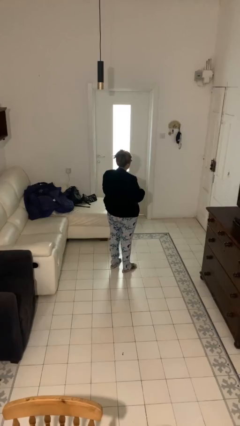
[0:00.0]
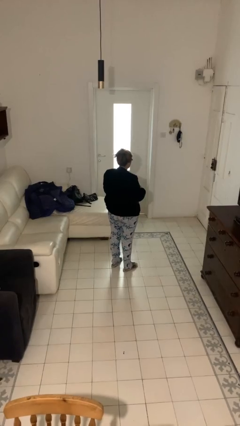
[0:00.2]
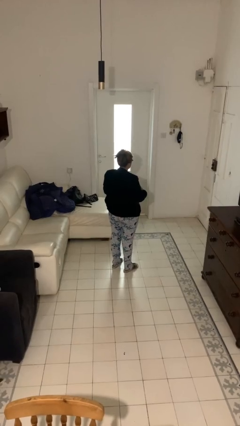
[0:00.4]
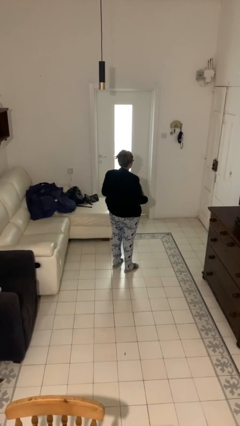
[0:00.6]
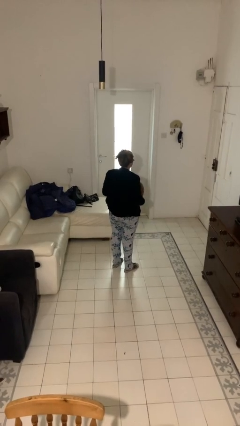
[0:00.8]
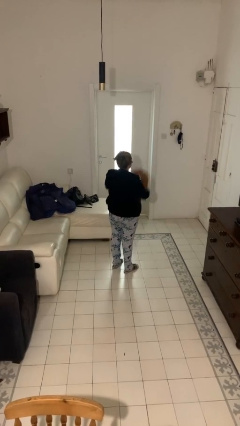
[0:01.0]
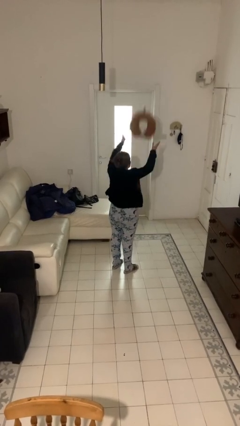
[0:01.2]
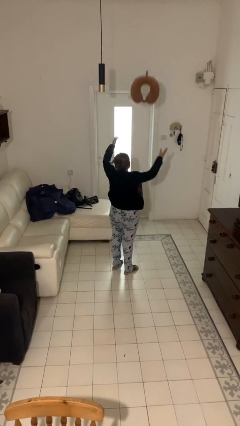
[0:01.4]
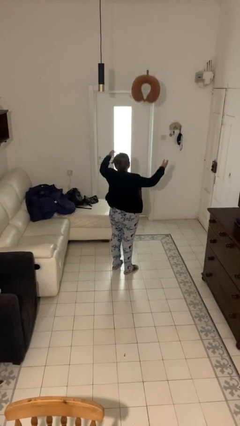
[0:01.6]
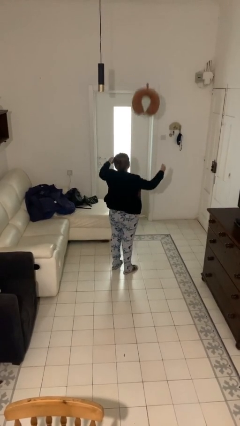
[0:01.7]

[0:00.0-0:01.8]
person drops object

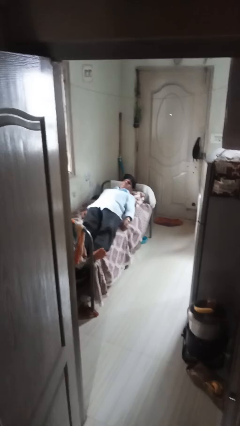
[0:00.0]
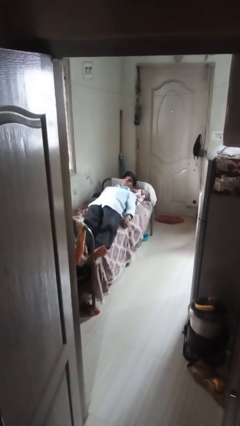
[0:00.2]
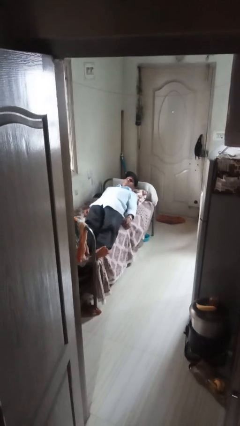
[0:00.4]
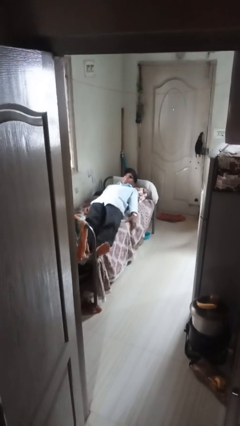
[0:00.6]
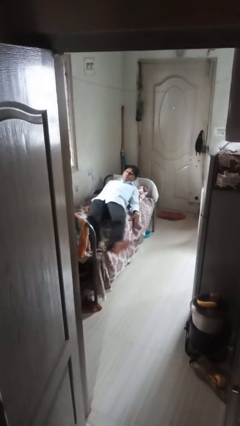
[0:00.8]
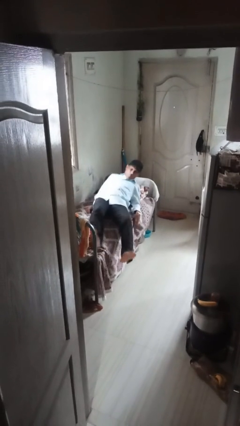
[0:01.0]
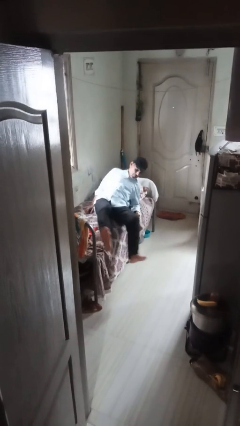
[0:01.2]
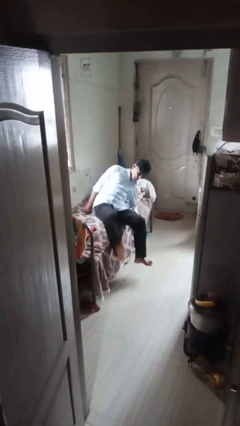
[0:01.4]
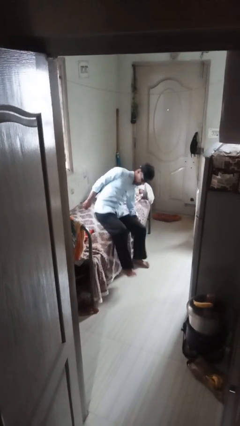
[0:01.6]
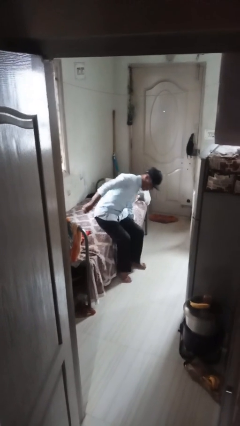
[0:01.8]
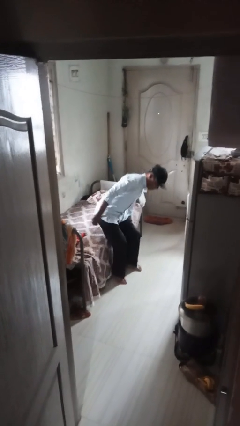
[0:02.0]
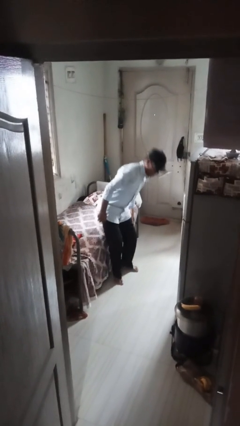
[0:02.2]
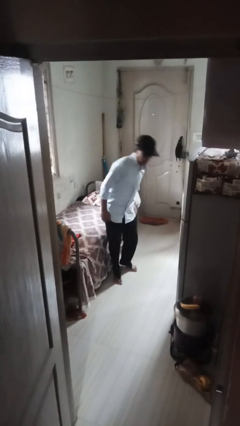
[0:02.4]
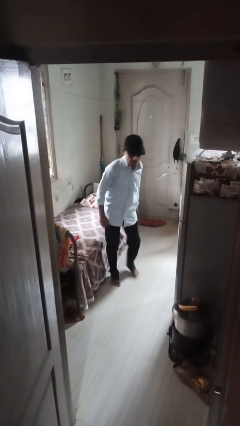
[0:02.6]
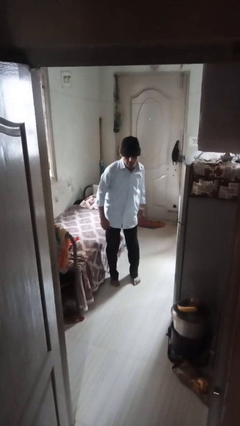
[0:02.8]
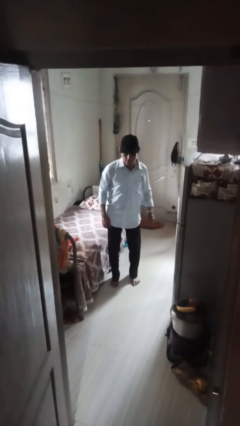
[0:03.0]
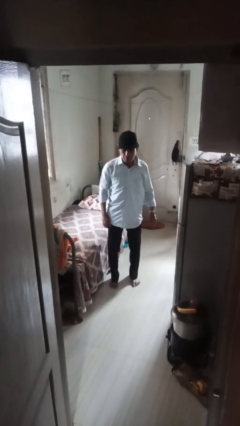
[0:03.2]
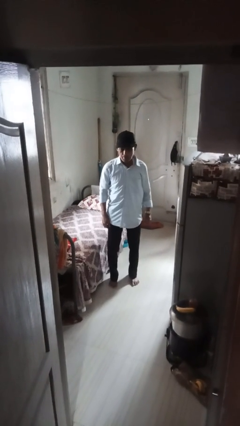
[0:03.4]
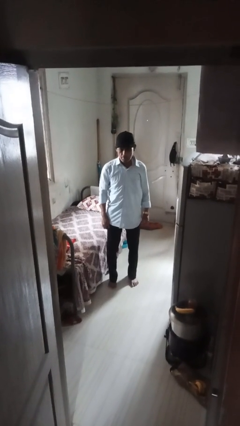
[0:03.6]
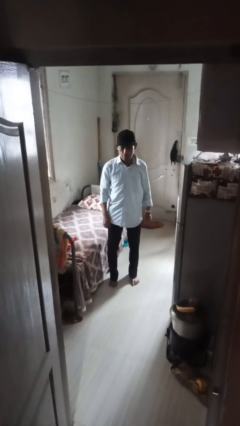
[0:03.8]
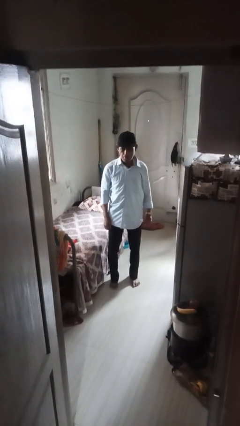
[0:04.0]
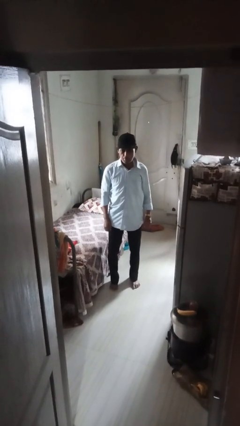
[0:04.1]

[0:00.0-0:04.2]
person stands up

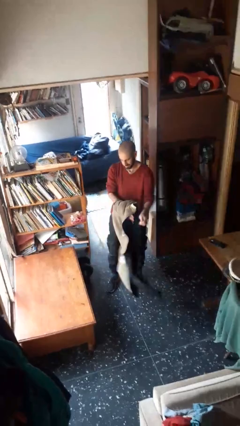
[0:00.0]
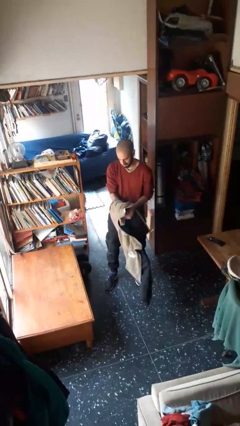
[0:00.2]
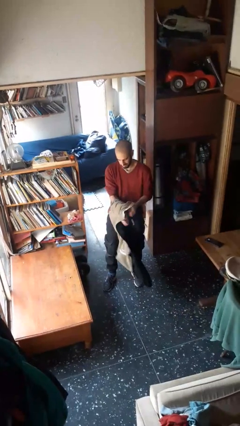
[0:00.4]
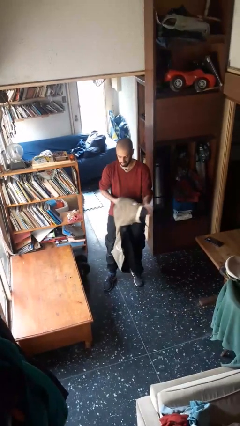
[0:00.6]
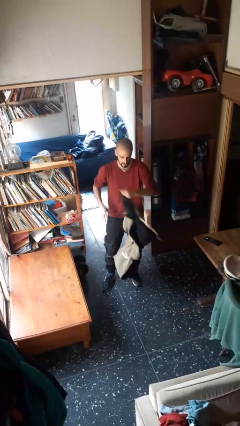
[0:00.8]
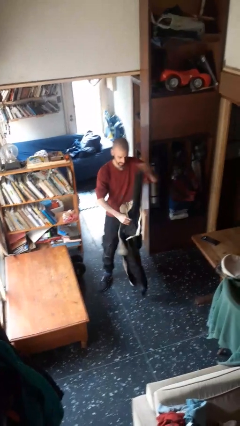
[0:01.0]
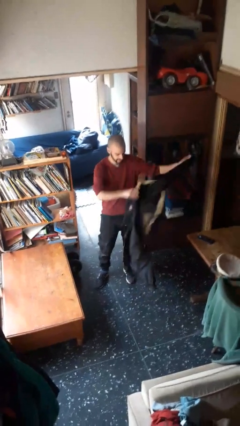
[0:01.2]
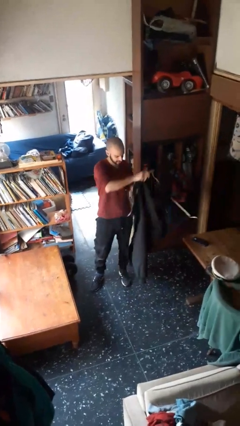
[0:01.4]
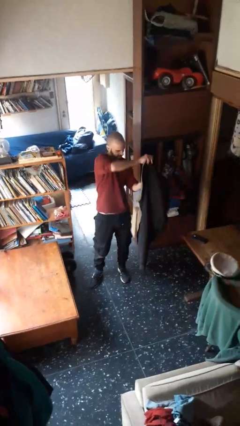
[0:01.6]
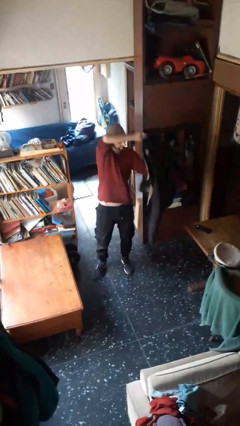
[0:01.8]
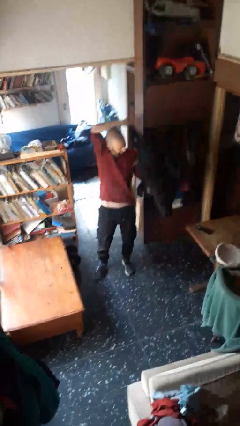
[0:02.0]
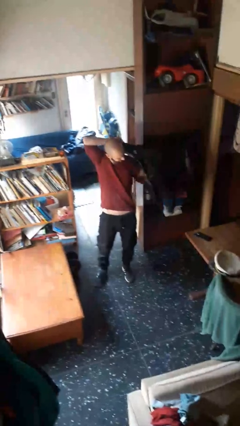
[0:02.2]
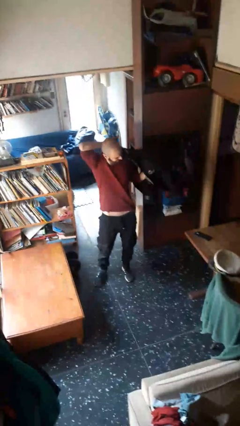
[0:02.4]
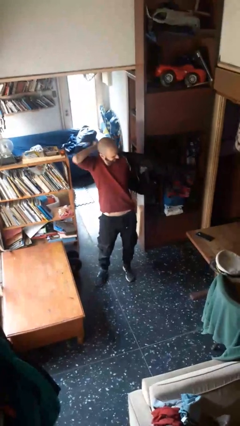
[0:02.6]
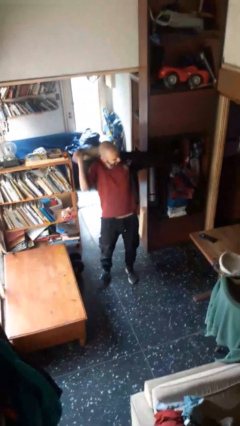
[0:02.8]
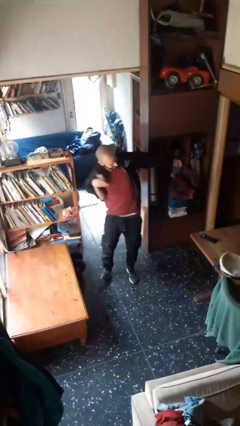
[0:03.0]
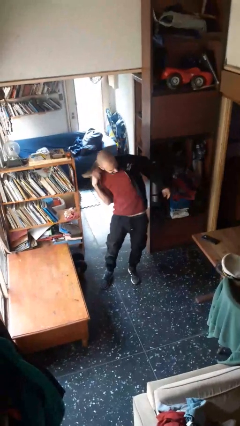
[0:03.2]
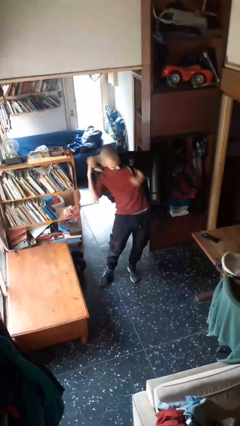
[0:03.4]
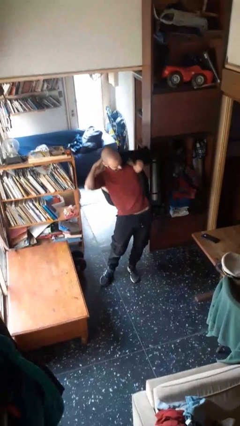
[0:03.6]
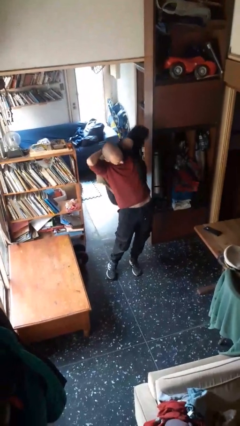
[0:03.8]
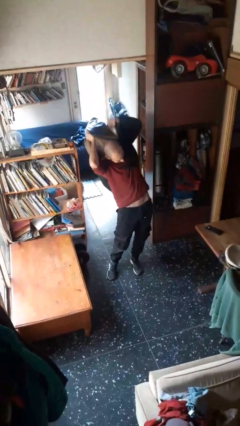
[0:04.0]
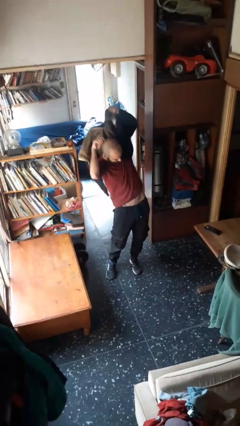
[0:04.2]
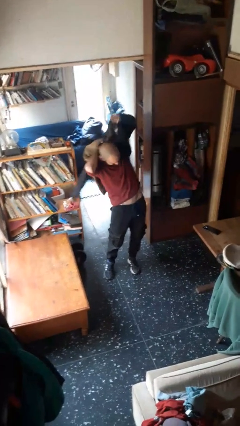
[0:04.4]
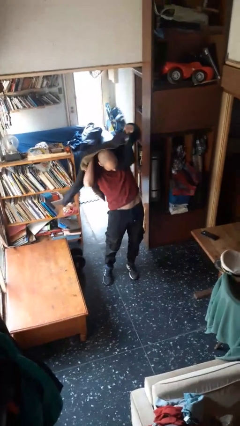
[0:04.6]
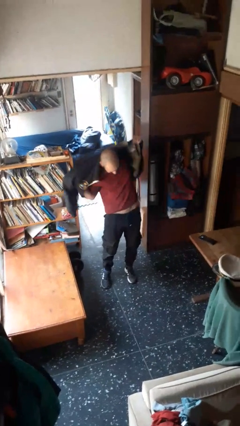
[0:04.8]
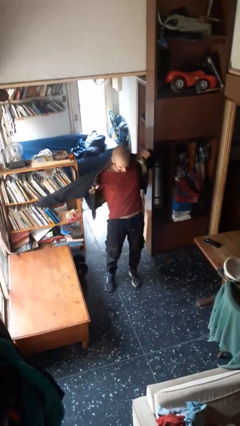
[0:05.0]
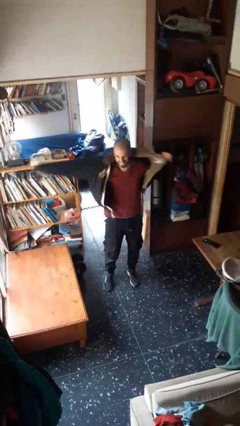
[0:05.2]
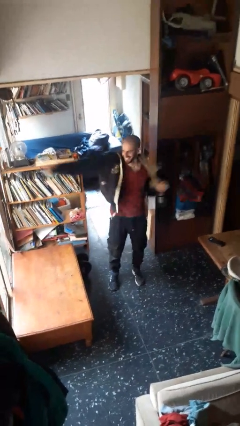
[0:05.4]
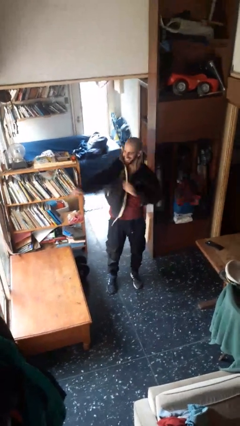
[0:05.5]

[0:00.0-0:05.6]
person puts on jacket

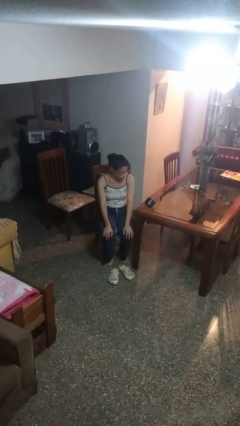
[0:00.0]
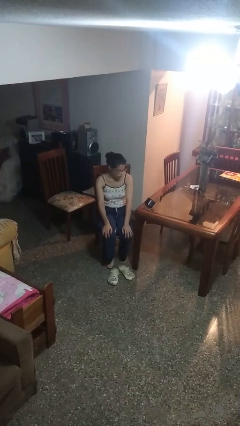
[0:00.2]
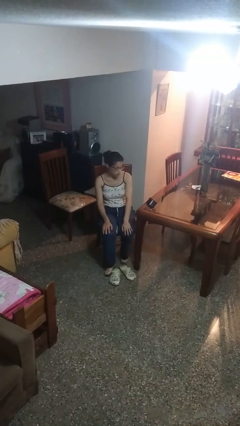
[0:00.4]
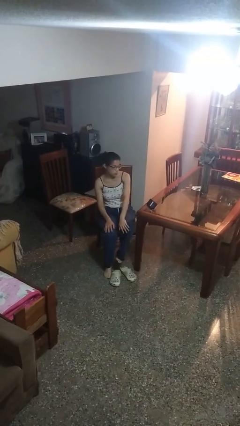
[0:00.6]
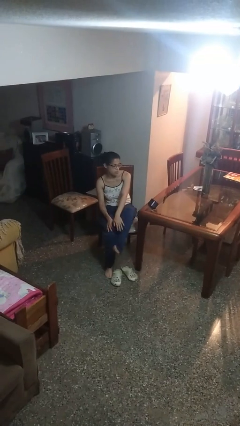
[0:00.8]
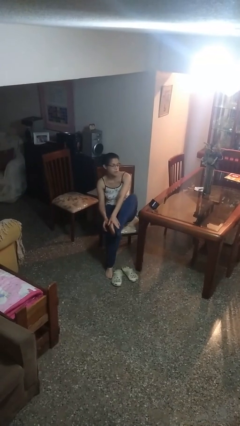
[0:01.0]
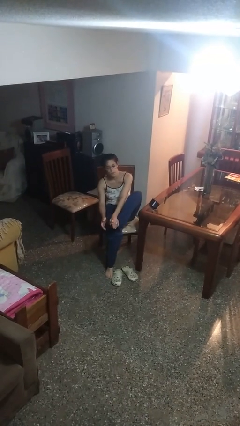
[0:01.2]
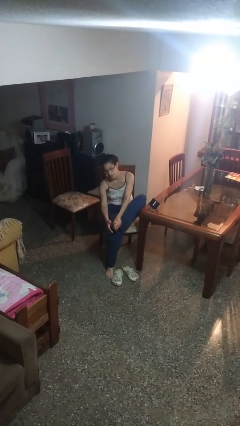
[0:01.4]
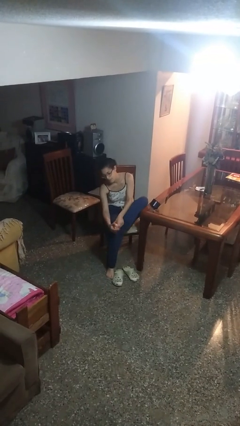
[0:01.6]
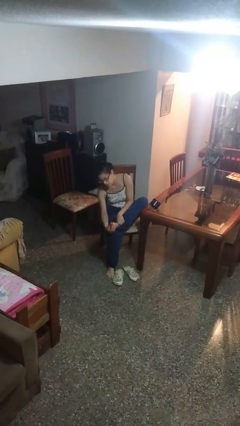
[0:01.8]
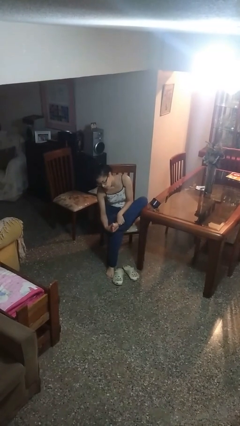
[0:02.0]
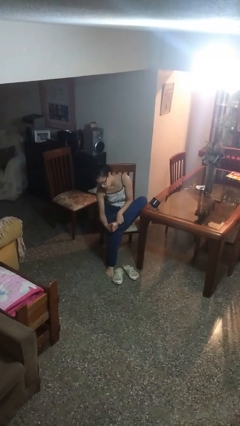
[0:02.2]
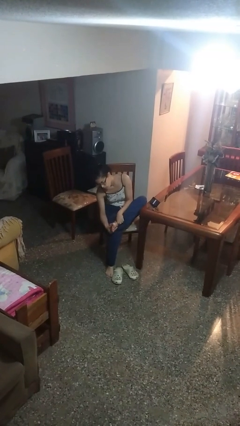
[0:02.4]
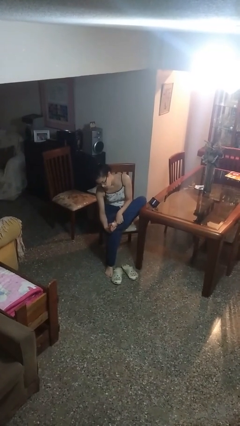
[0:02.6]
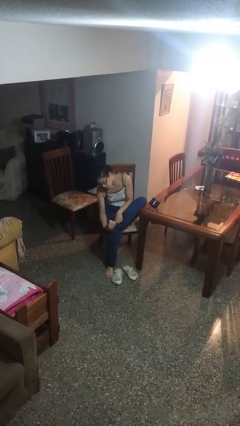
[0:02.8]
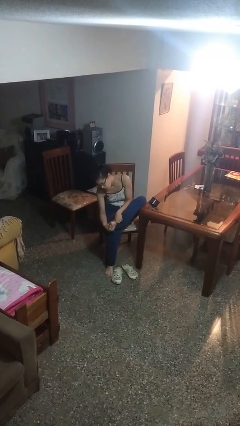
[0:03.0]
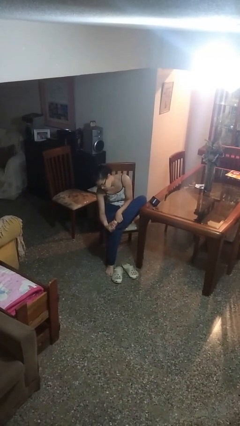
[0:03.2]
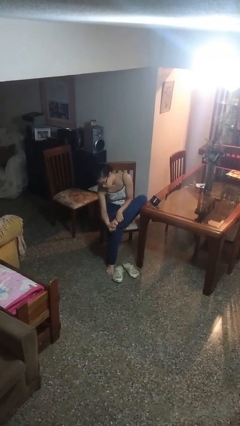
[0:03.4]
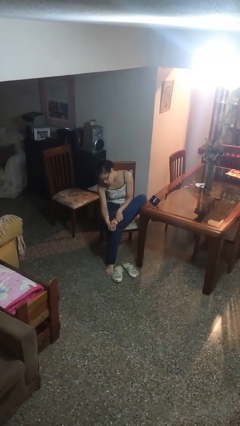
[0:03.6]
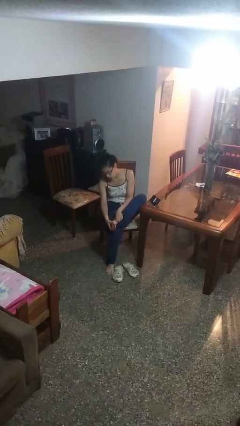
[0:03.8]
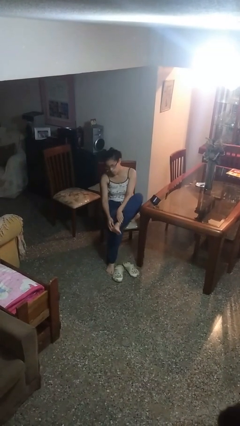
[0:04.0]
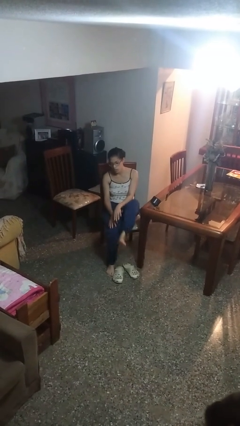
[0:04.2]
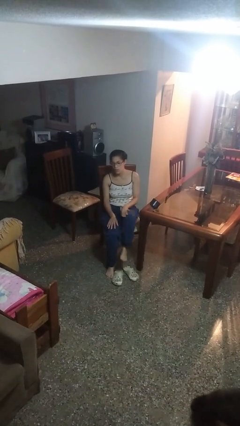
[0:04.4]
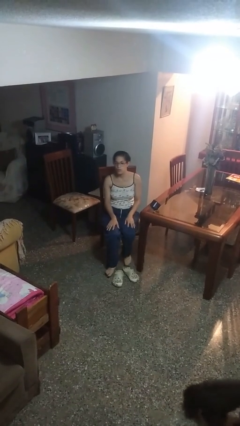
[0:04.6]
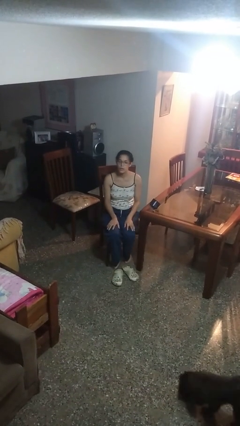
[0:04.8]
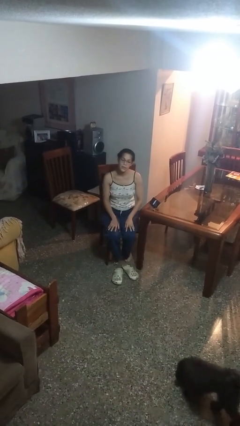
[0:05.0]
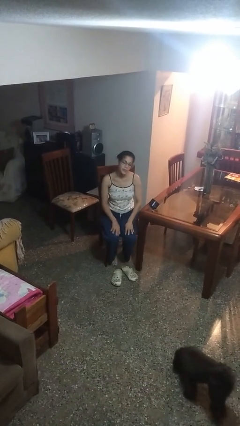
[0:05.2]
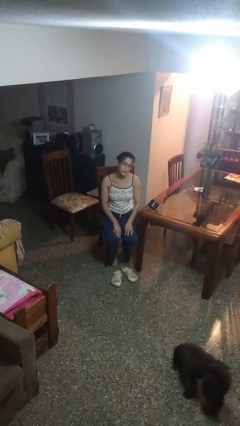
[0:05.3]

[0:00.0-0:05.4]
person rubs foot

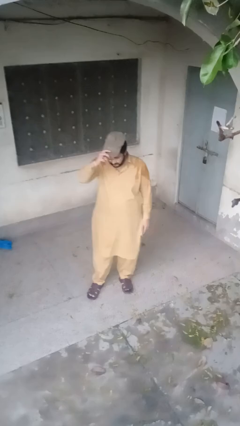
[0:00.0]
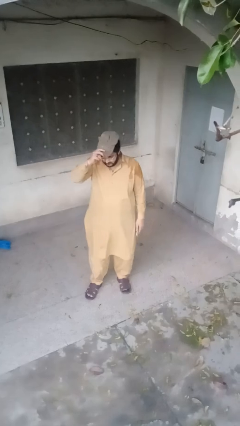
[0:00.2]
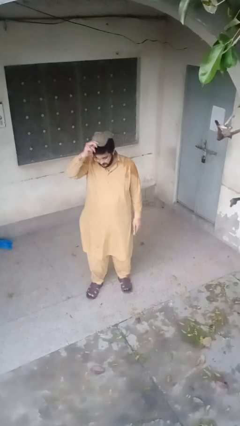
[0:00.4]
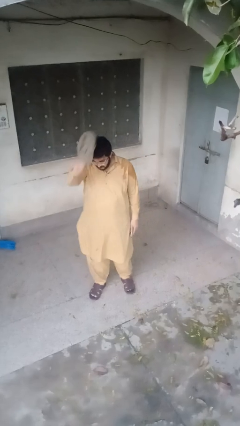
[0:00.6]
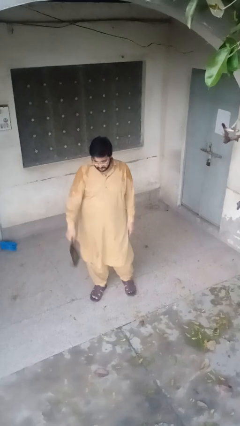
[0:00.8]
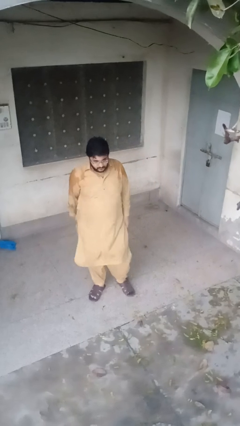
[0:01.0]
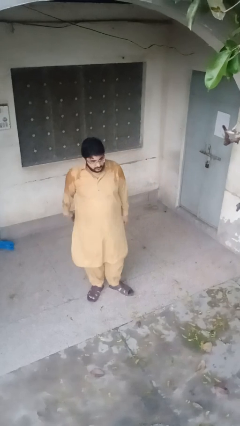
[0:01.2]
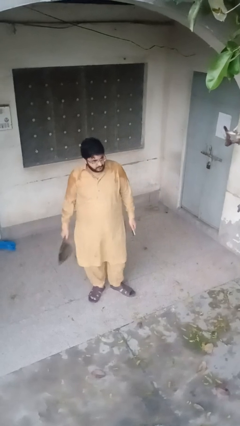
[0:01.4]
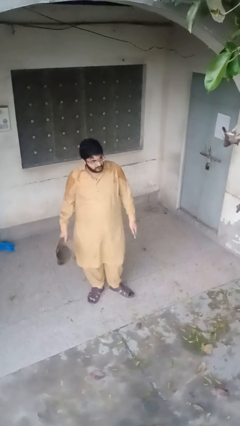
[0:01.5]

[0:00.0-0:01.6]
person takes off hat
